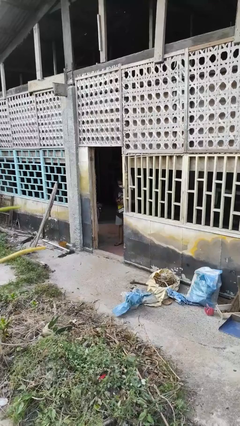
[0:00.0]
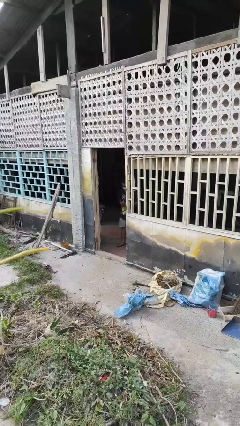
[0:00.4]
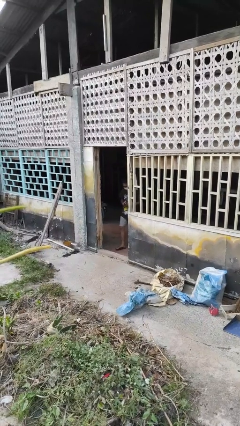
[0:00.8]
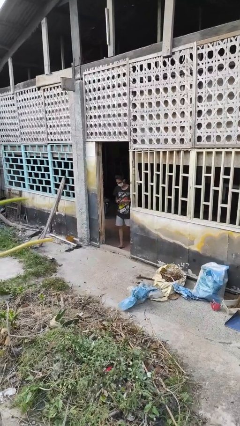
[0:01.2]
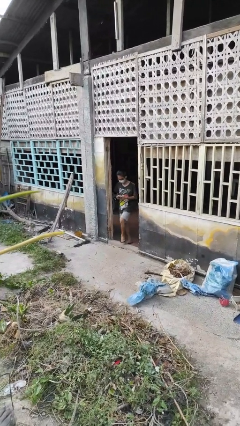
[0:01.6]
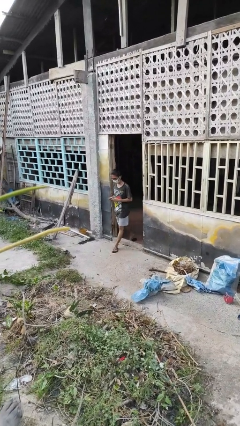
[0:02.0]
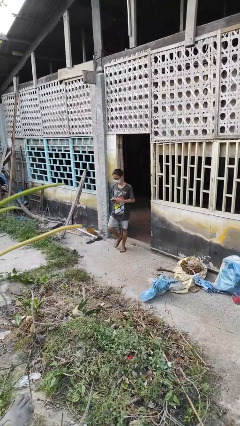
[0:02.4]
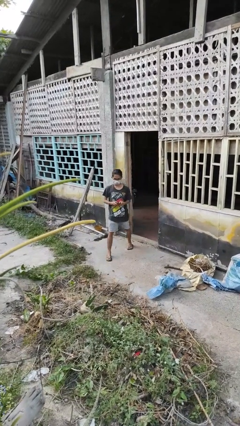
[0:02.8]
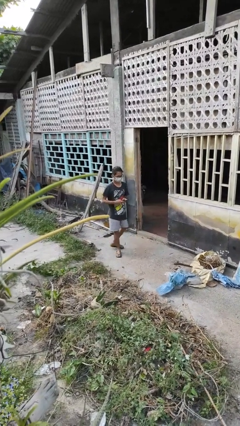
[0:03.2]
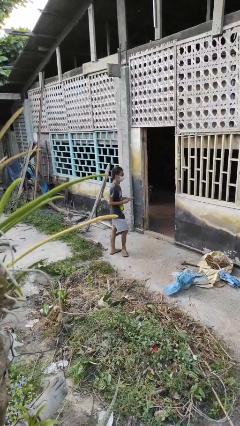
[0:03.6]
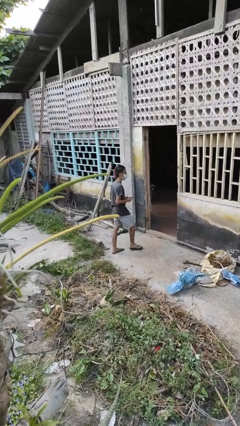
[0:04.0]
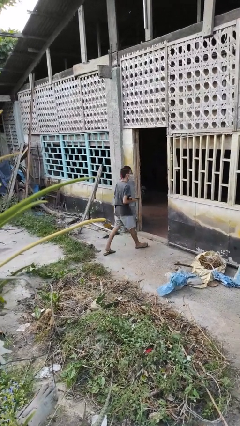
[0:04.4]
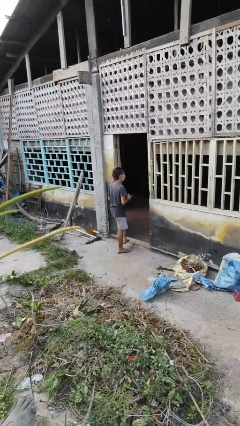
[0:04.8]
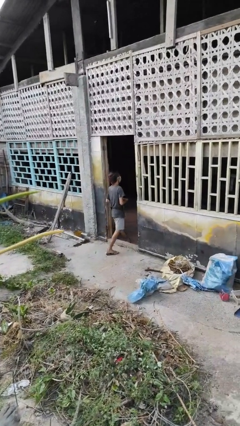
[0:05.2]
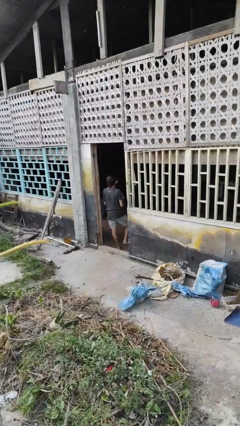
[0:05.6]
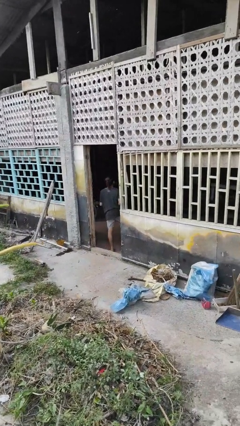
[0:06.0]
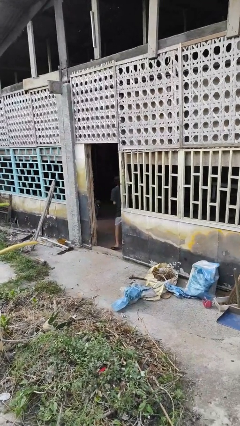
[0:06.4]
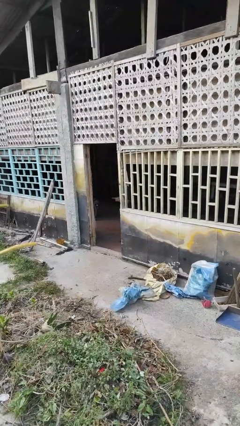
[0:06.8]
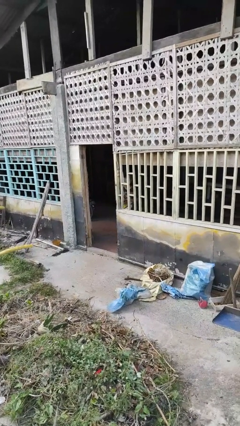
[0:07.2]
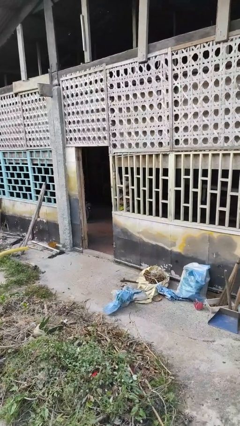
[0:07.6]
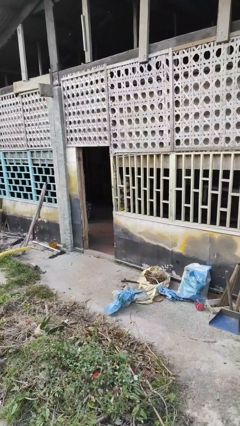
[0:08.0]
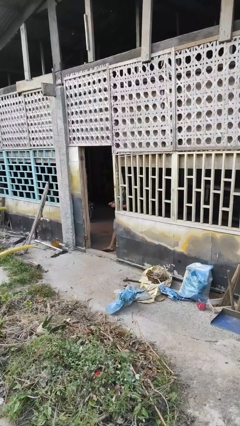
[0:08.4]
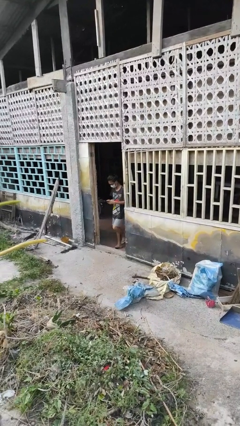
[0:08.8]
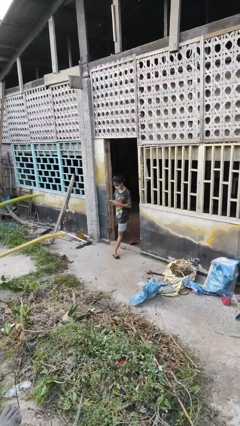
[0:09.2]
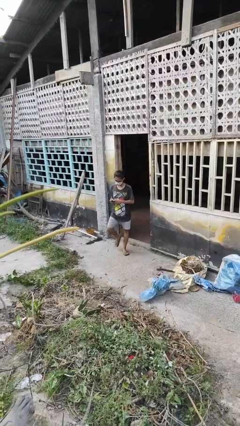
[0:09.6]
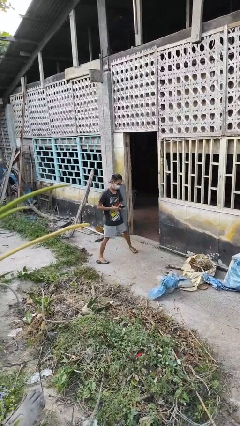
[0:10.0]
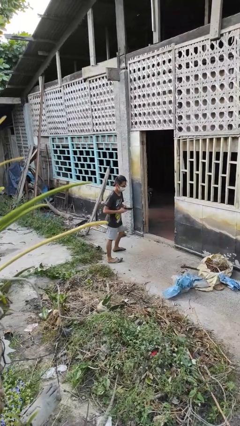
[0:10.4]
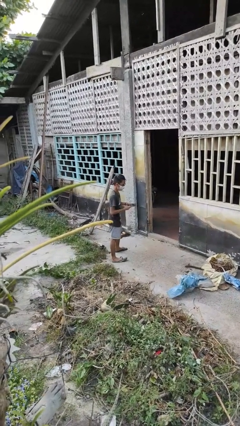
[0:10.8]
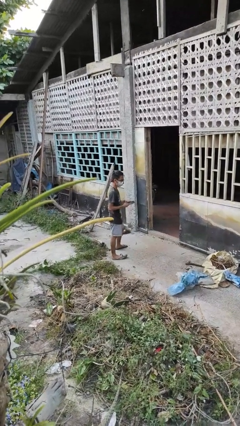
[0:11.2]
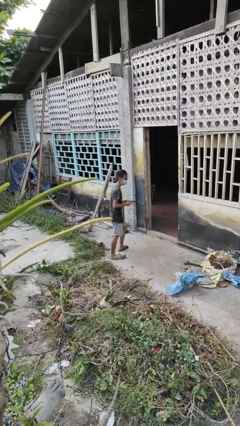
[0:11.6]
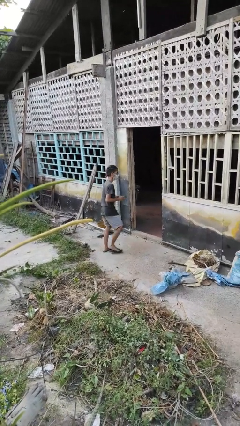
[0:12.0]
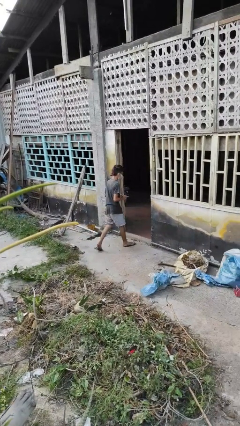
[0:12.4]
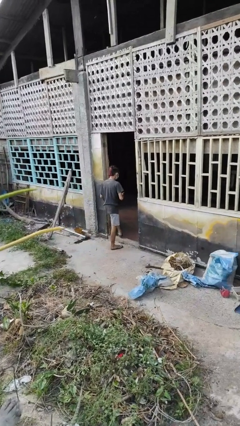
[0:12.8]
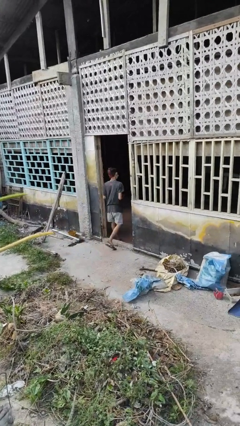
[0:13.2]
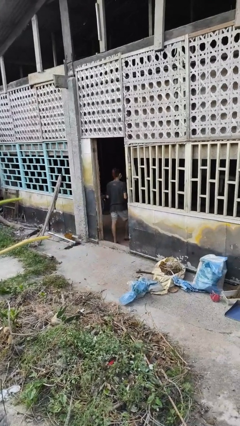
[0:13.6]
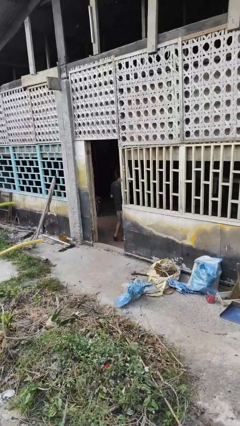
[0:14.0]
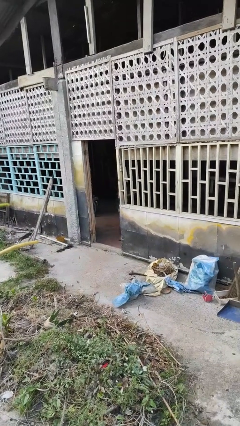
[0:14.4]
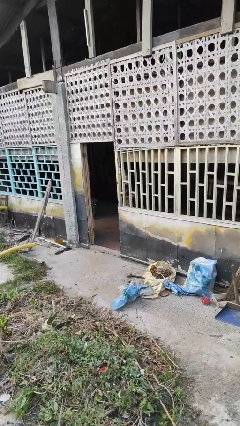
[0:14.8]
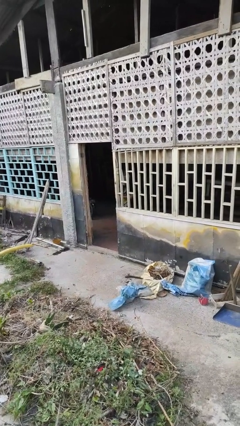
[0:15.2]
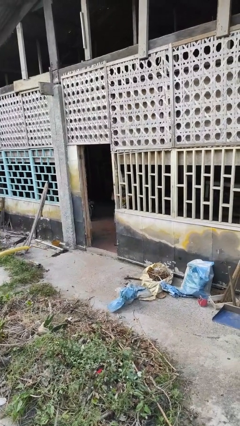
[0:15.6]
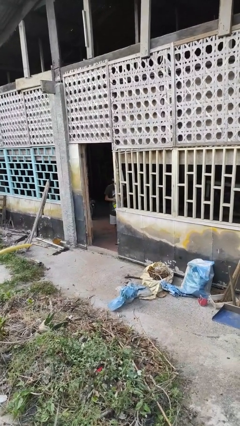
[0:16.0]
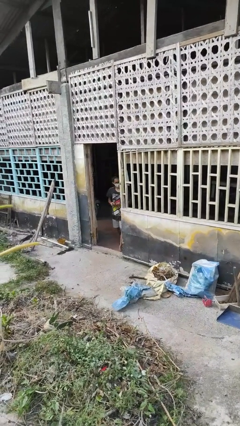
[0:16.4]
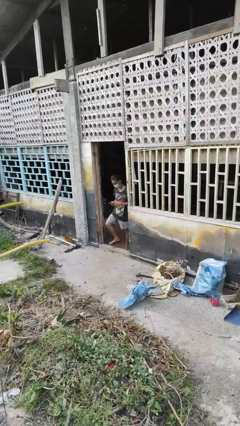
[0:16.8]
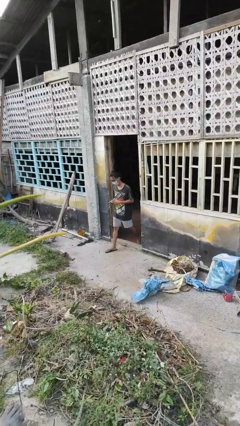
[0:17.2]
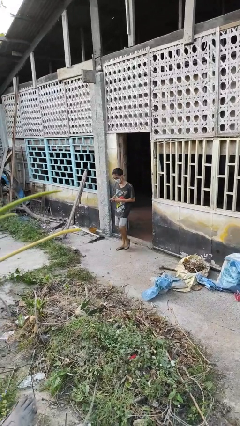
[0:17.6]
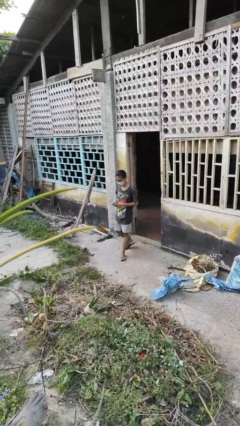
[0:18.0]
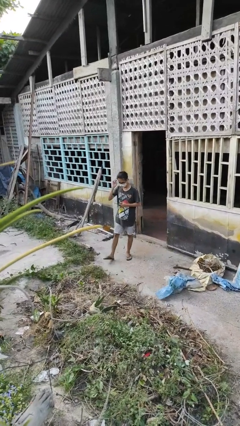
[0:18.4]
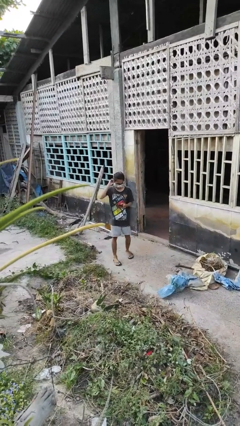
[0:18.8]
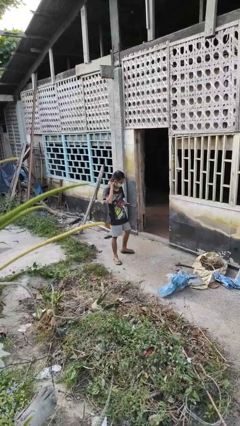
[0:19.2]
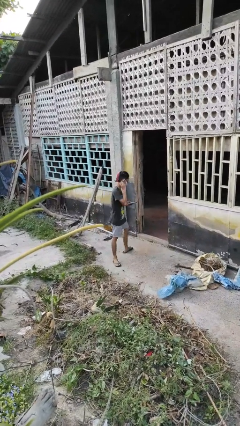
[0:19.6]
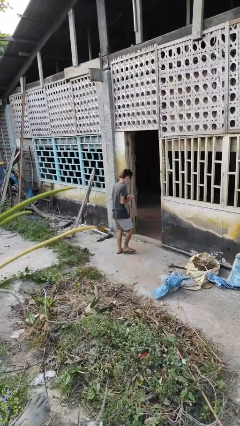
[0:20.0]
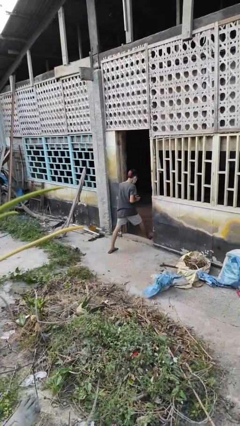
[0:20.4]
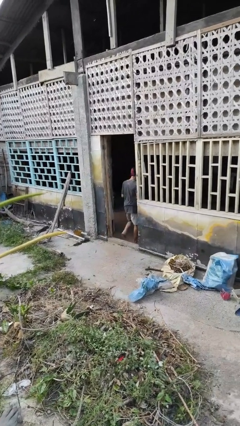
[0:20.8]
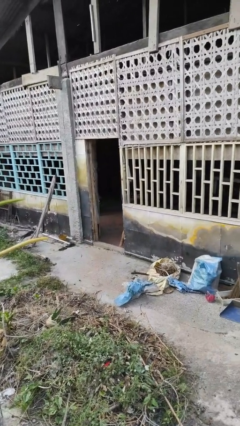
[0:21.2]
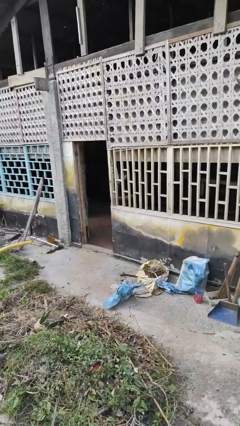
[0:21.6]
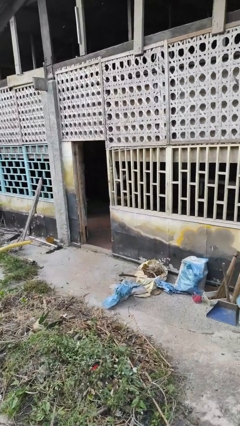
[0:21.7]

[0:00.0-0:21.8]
person texts on phone

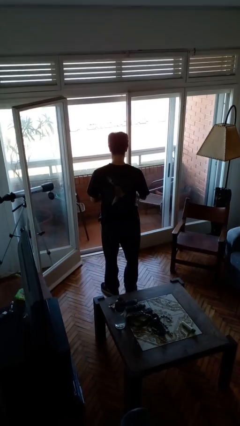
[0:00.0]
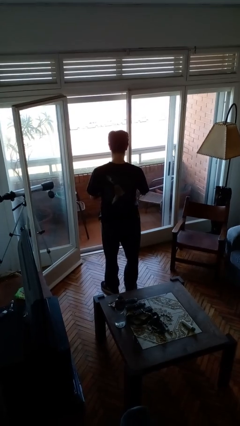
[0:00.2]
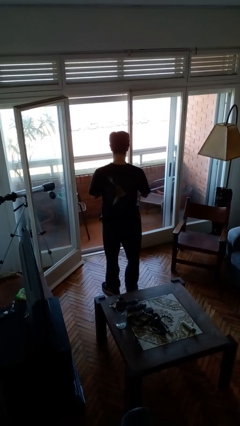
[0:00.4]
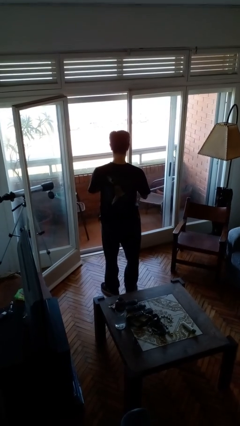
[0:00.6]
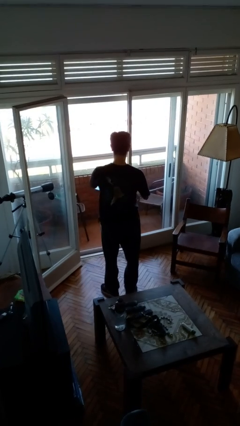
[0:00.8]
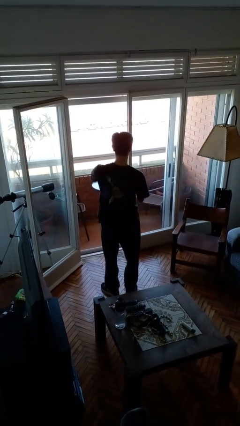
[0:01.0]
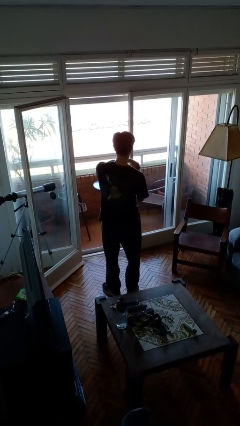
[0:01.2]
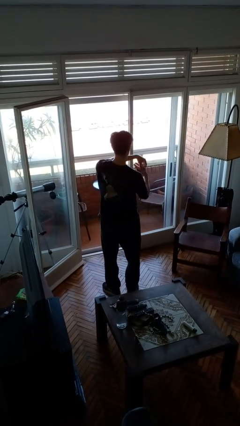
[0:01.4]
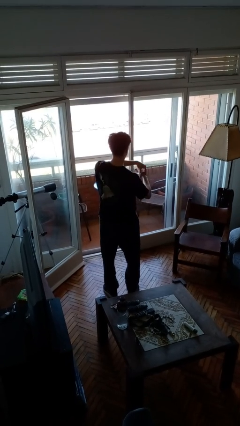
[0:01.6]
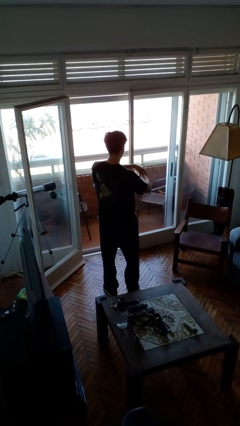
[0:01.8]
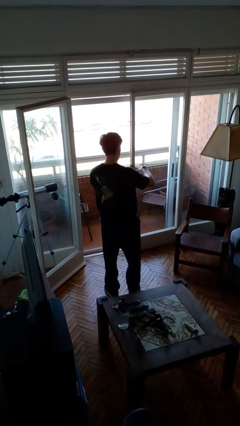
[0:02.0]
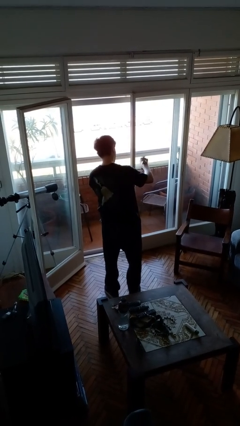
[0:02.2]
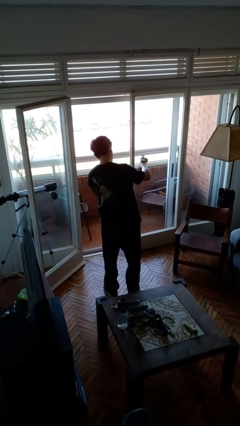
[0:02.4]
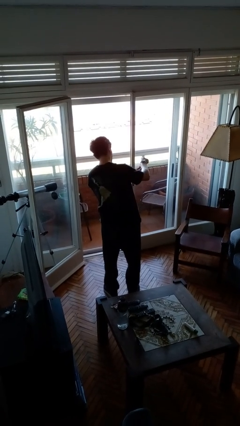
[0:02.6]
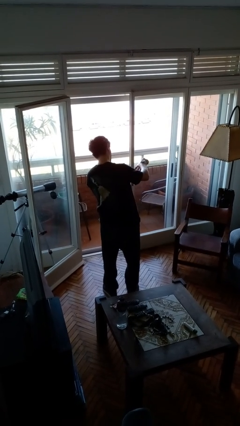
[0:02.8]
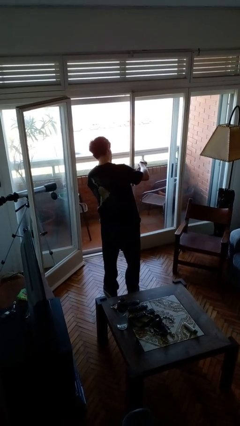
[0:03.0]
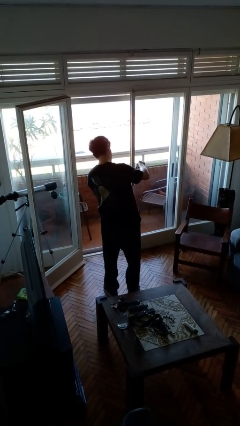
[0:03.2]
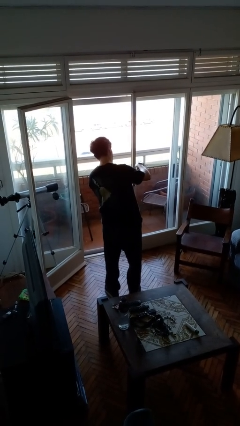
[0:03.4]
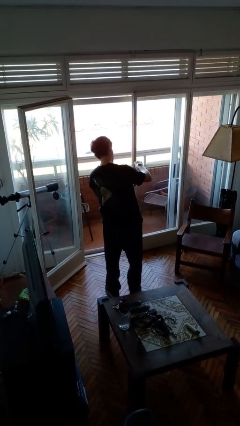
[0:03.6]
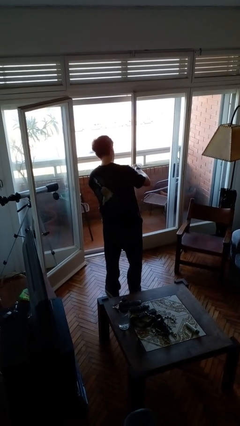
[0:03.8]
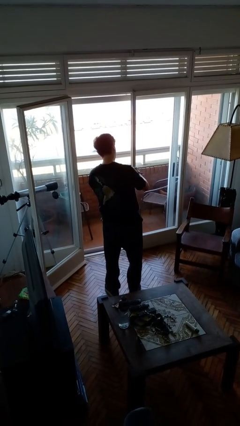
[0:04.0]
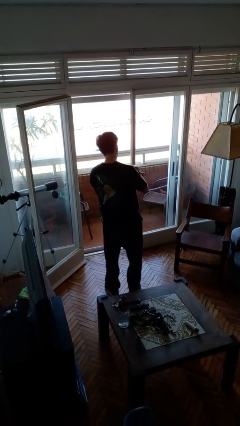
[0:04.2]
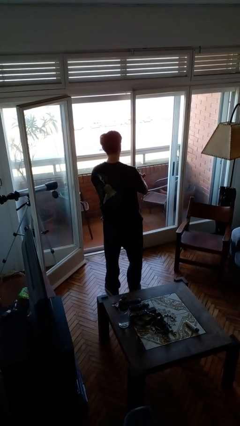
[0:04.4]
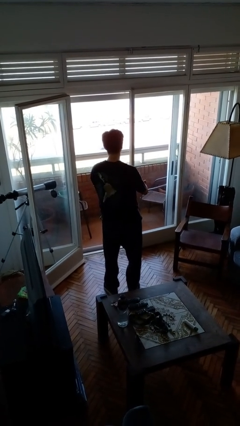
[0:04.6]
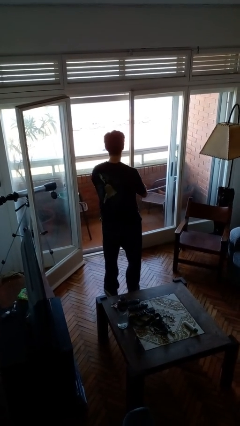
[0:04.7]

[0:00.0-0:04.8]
person puts on wristwatch

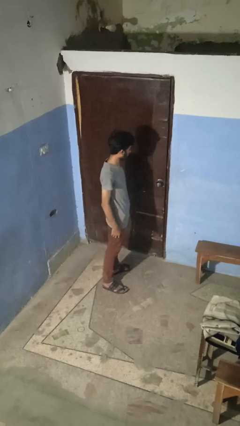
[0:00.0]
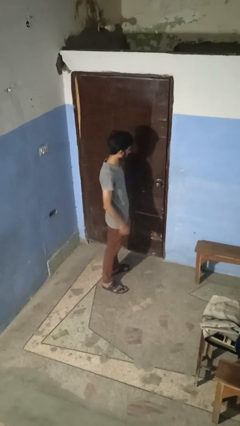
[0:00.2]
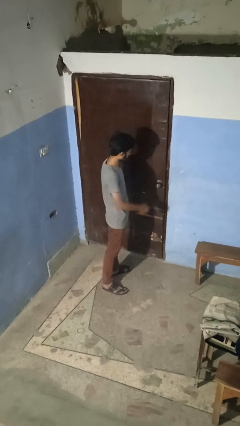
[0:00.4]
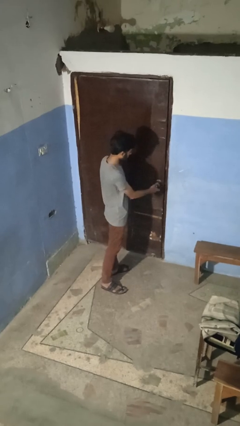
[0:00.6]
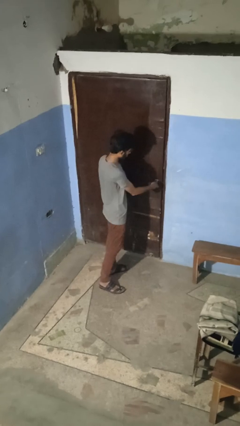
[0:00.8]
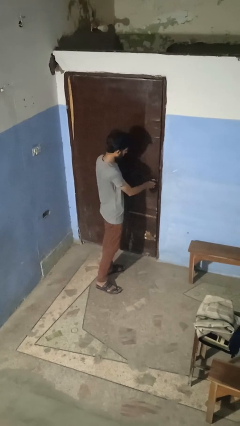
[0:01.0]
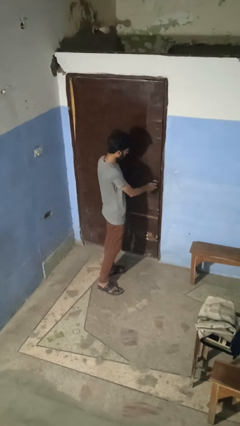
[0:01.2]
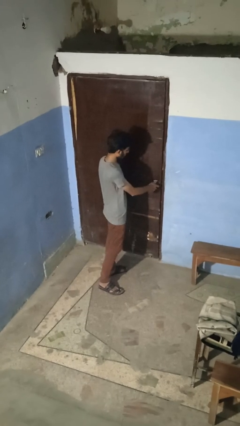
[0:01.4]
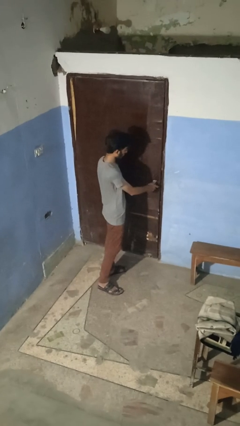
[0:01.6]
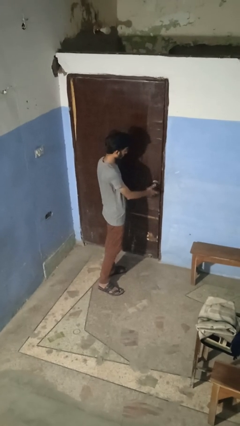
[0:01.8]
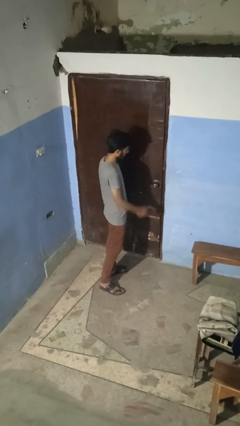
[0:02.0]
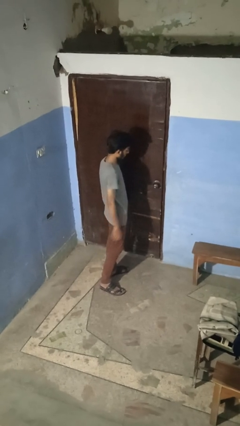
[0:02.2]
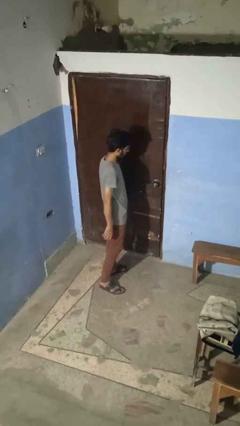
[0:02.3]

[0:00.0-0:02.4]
person unlocks door with keys
